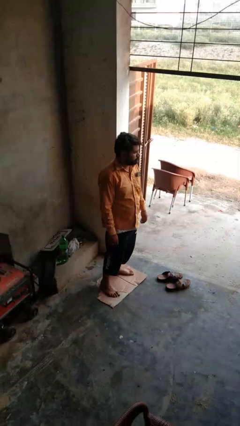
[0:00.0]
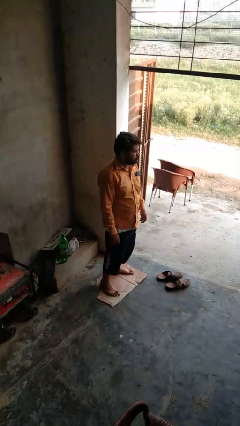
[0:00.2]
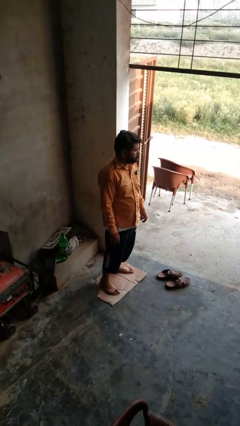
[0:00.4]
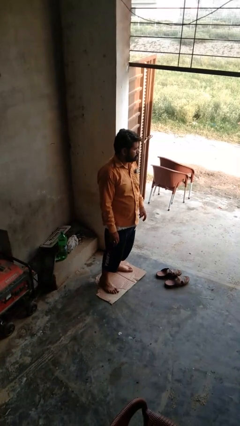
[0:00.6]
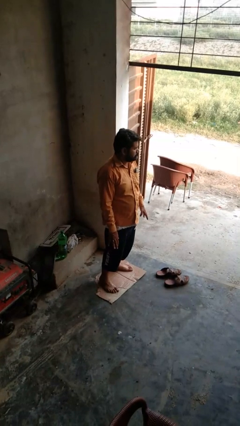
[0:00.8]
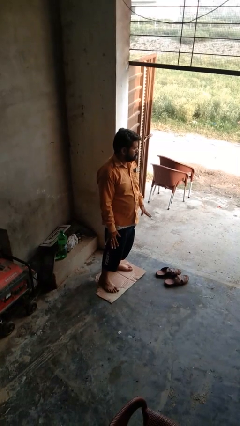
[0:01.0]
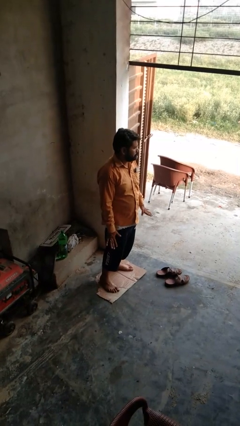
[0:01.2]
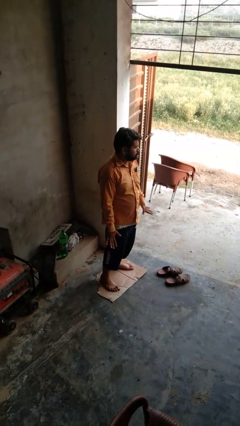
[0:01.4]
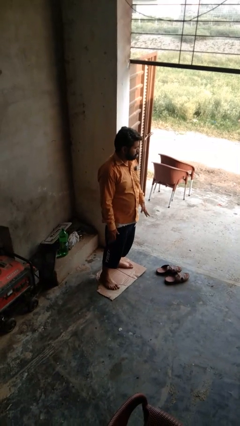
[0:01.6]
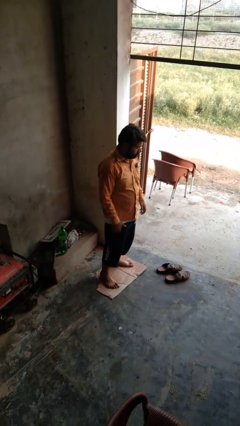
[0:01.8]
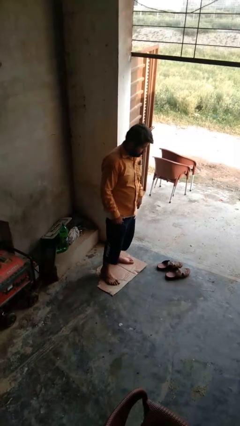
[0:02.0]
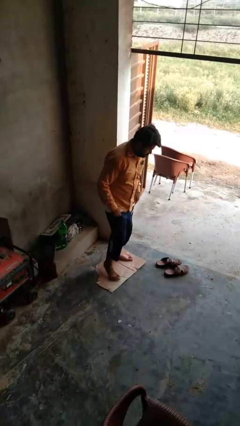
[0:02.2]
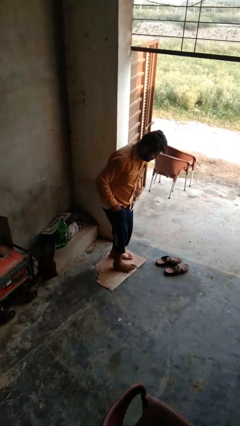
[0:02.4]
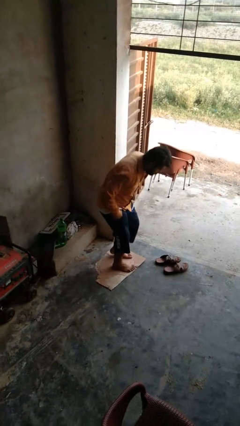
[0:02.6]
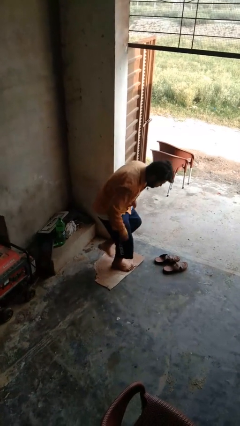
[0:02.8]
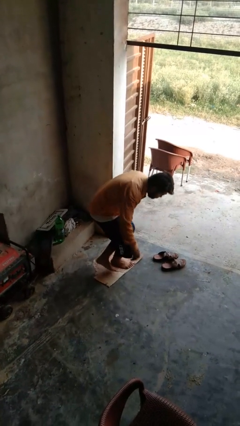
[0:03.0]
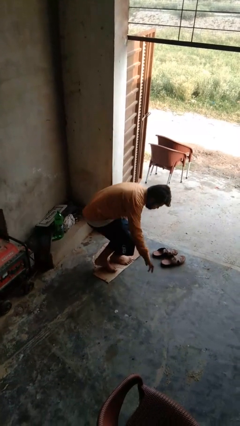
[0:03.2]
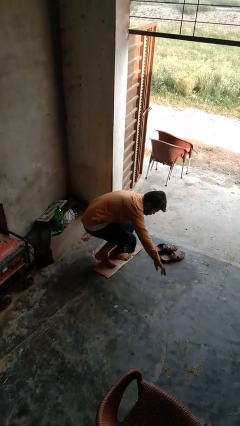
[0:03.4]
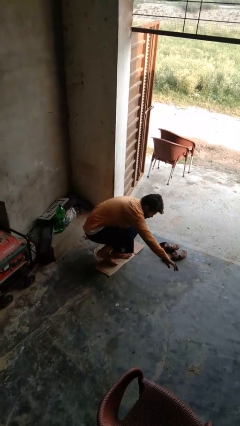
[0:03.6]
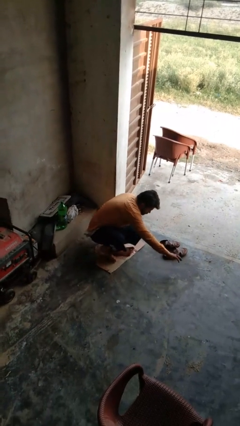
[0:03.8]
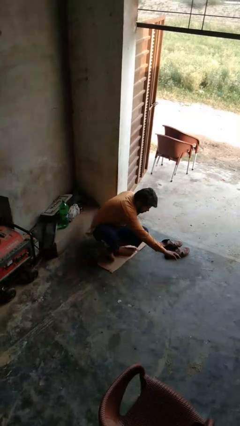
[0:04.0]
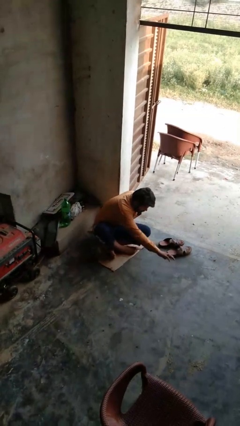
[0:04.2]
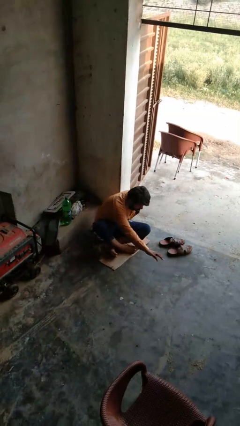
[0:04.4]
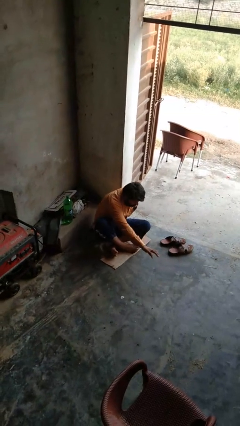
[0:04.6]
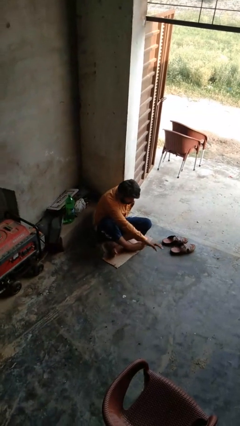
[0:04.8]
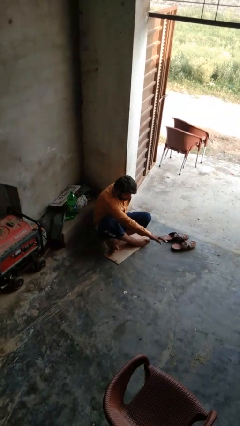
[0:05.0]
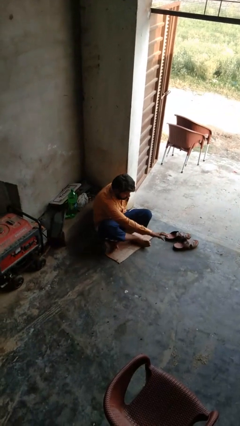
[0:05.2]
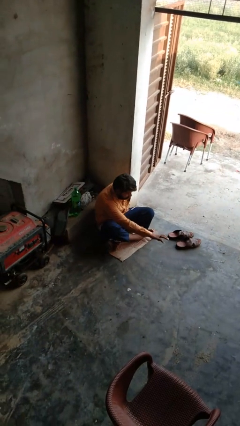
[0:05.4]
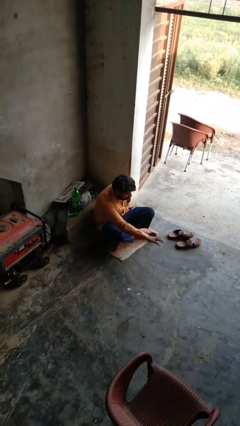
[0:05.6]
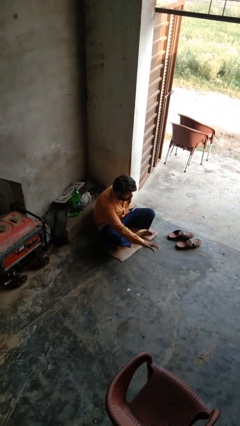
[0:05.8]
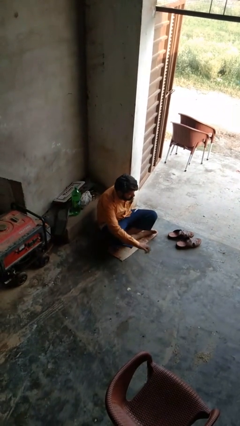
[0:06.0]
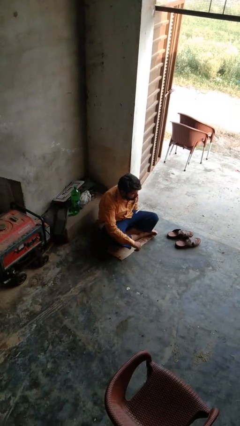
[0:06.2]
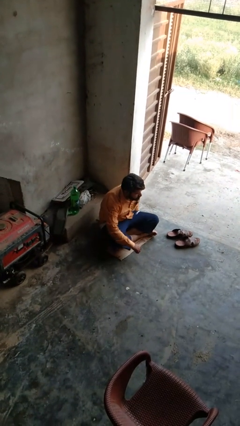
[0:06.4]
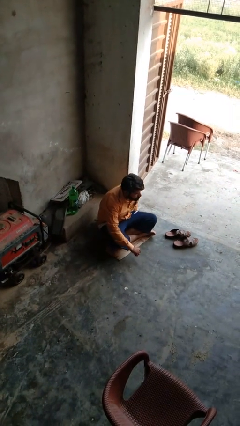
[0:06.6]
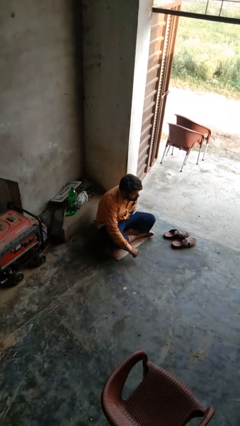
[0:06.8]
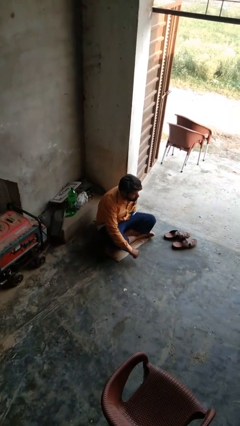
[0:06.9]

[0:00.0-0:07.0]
person sits crisscross

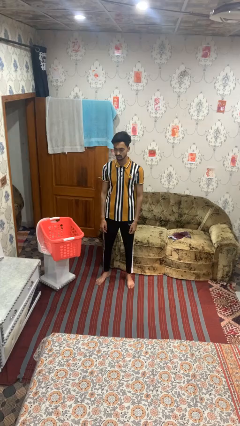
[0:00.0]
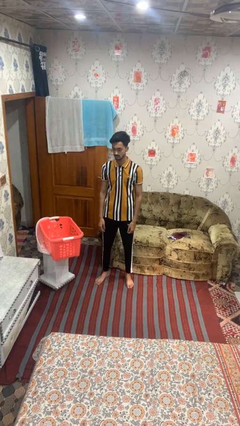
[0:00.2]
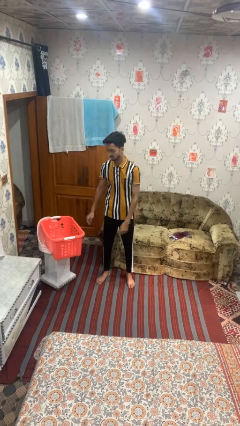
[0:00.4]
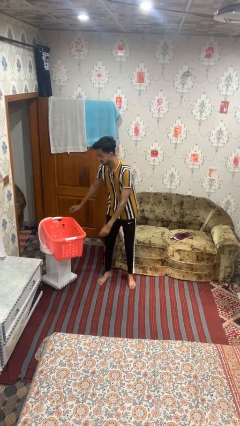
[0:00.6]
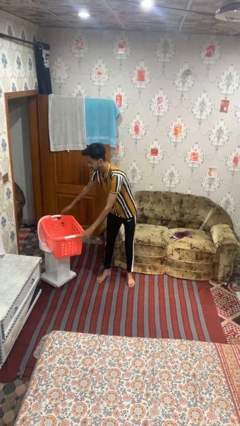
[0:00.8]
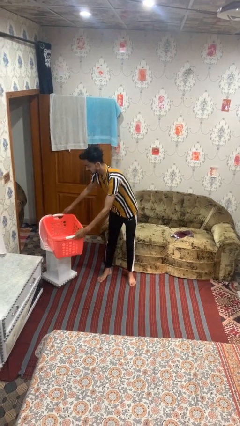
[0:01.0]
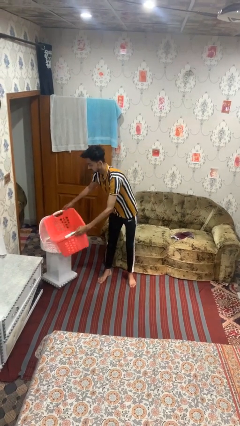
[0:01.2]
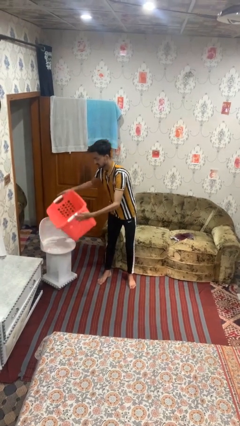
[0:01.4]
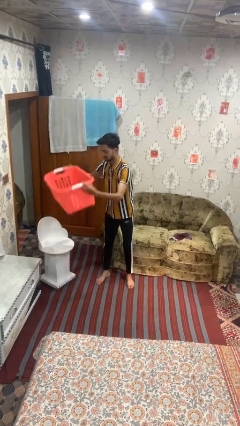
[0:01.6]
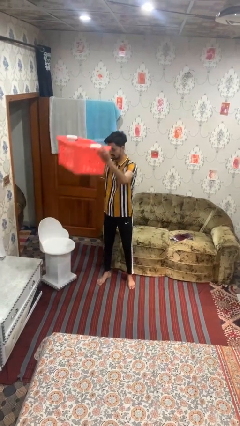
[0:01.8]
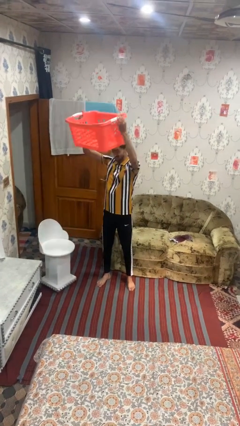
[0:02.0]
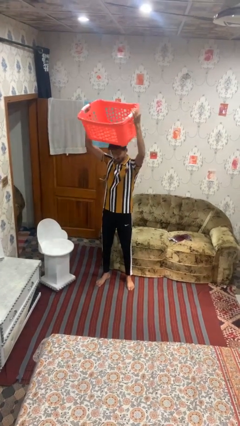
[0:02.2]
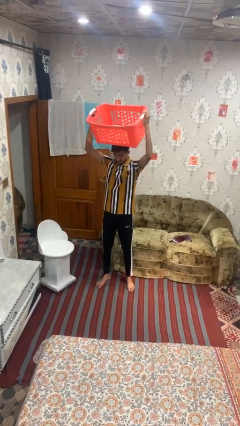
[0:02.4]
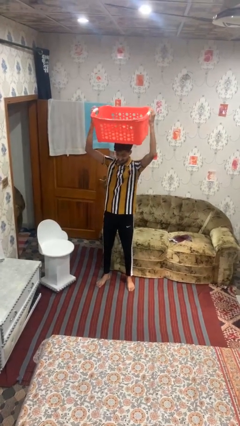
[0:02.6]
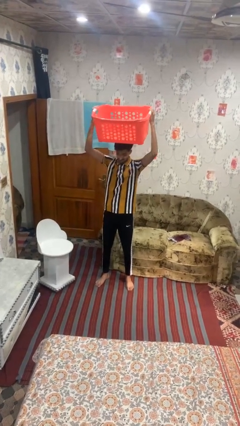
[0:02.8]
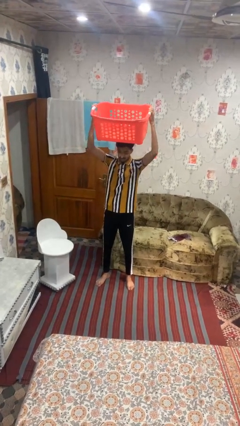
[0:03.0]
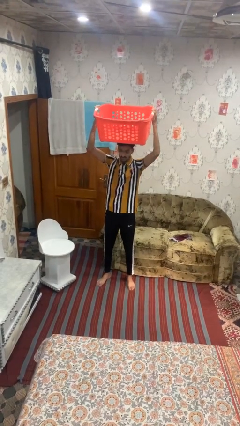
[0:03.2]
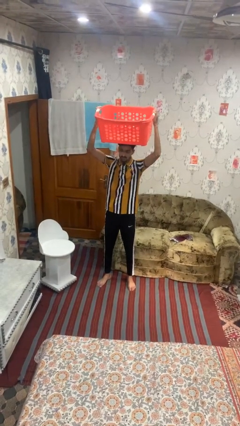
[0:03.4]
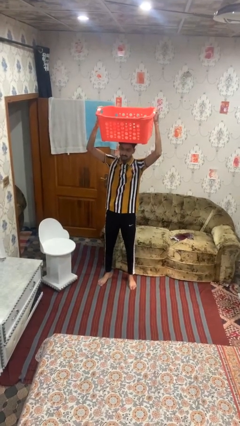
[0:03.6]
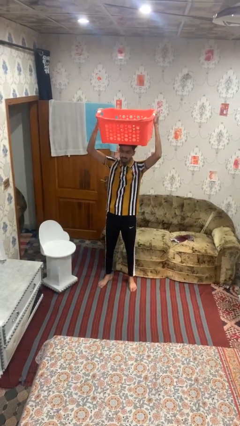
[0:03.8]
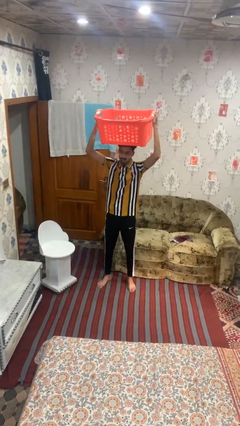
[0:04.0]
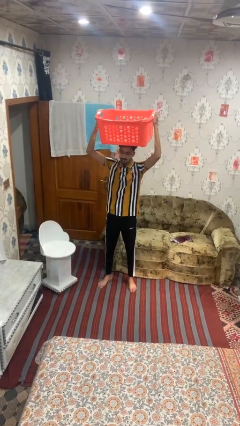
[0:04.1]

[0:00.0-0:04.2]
person holds object above head

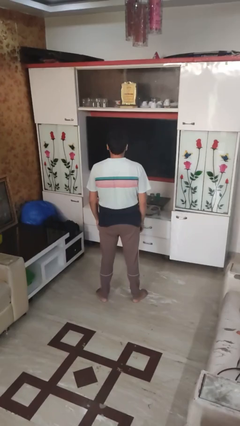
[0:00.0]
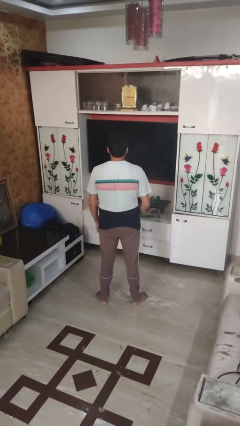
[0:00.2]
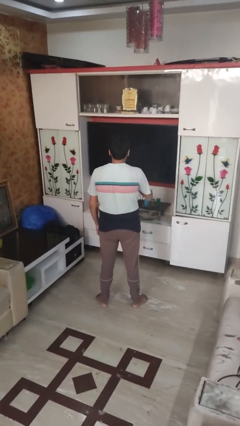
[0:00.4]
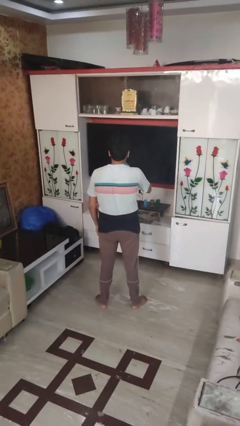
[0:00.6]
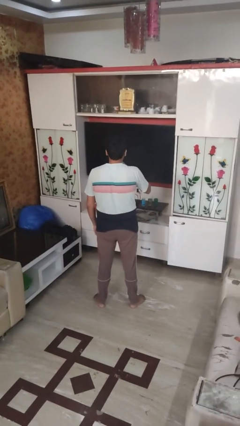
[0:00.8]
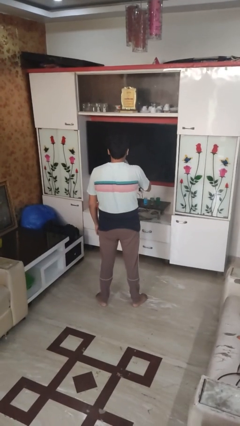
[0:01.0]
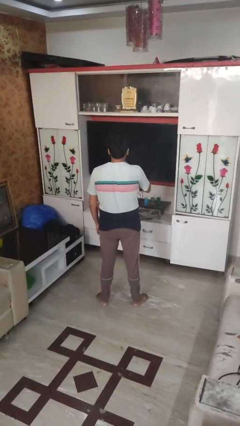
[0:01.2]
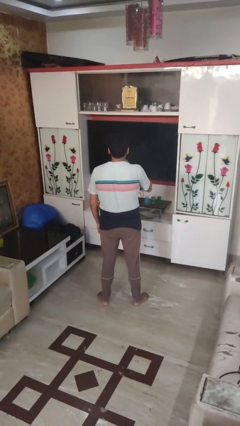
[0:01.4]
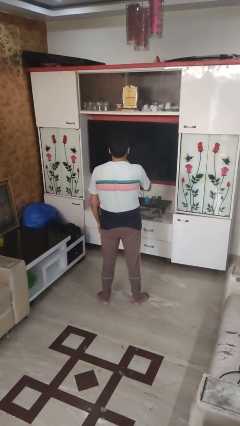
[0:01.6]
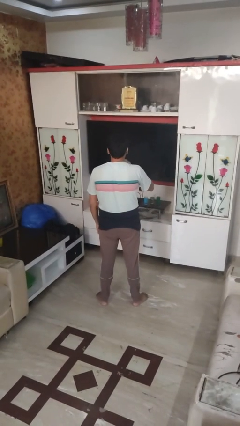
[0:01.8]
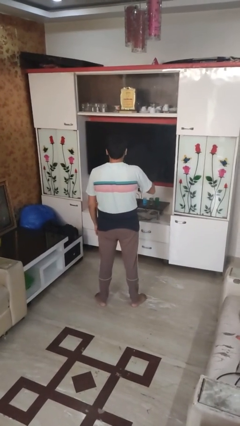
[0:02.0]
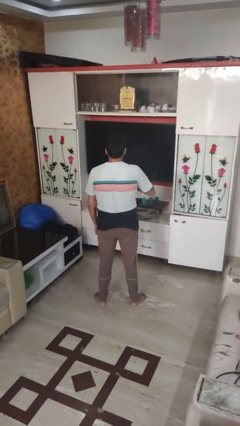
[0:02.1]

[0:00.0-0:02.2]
person strokes chin

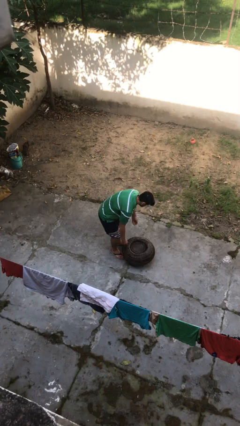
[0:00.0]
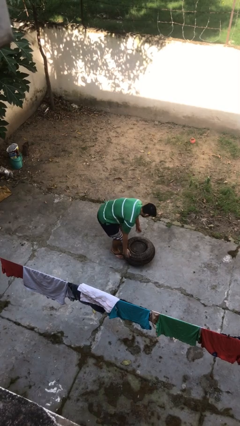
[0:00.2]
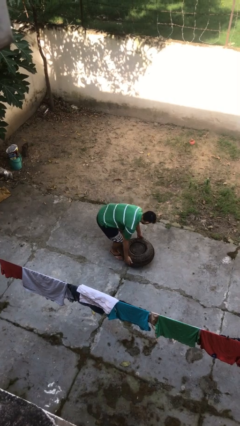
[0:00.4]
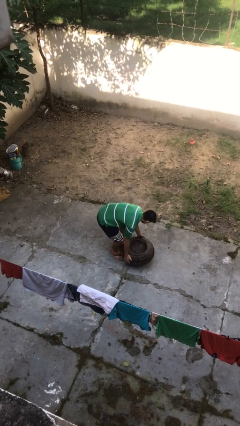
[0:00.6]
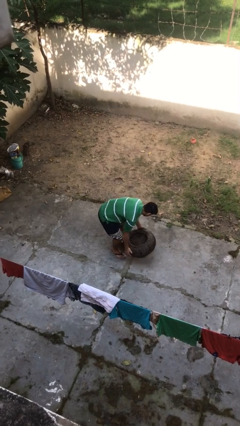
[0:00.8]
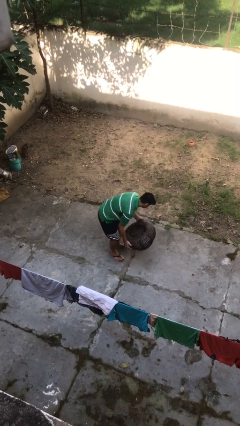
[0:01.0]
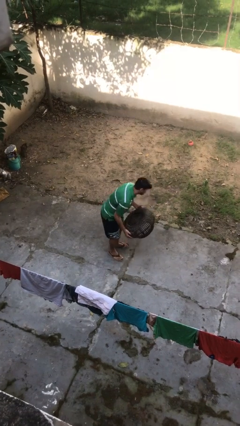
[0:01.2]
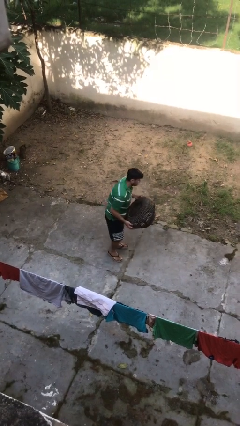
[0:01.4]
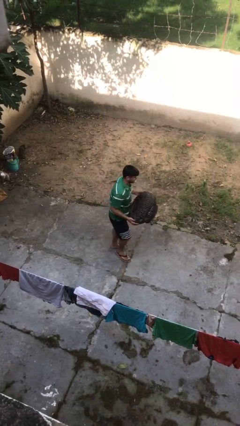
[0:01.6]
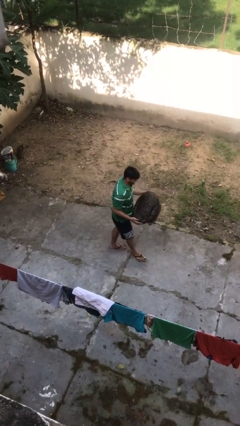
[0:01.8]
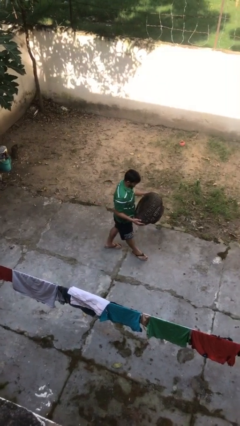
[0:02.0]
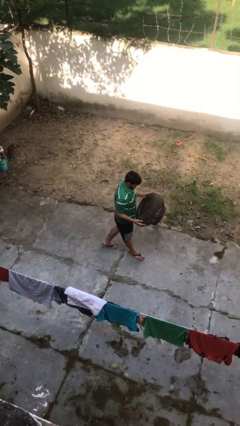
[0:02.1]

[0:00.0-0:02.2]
person picks up object from floor

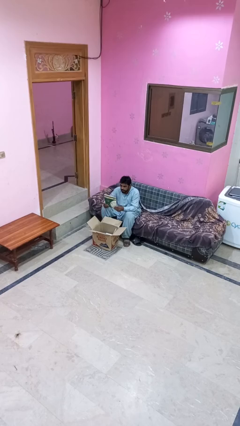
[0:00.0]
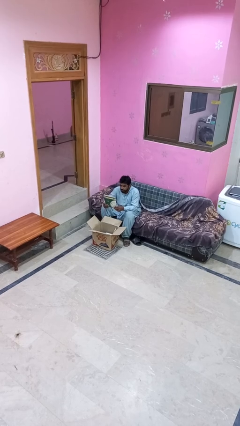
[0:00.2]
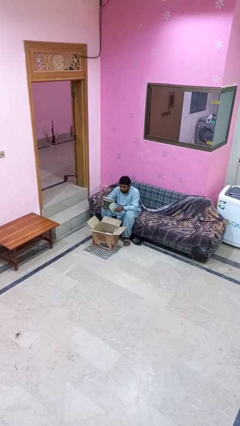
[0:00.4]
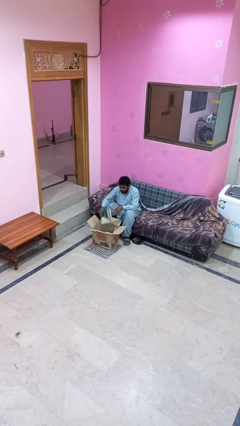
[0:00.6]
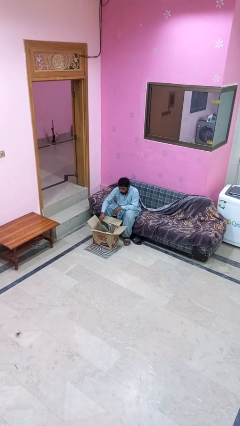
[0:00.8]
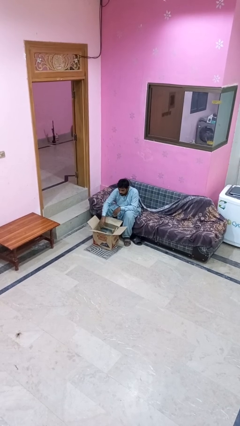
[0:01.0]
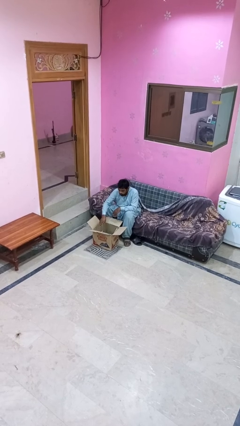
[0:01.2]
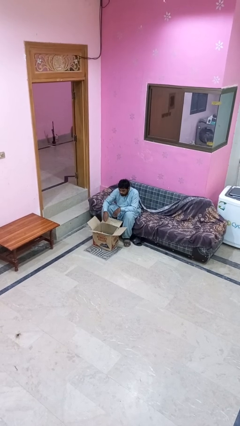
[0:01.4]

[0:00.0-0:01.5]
person puts object into box

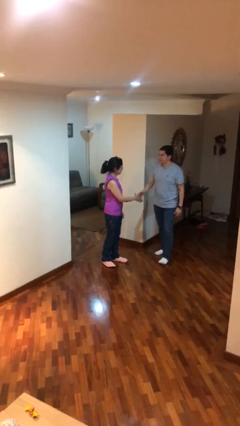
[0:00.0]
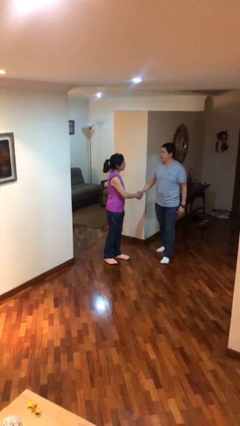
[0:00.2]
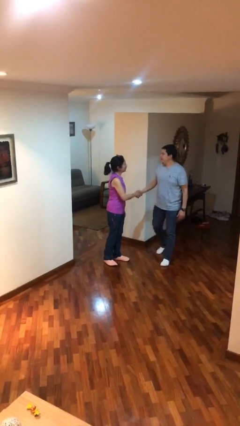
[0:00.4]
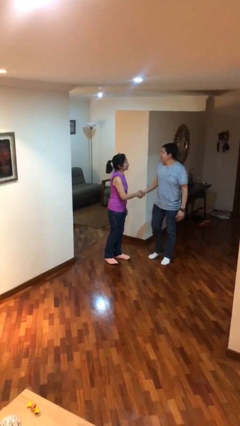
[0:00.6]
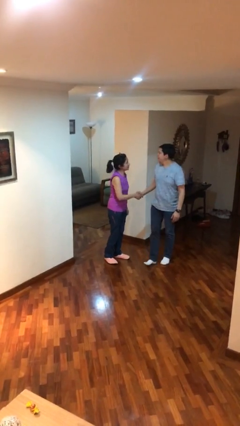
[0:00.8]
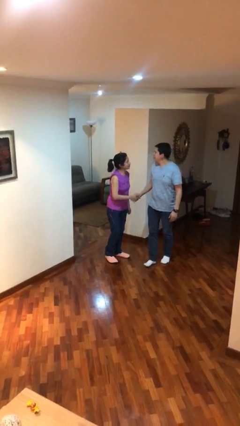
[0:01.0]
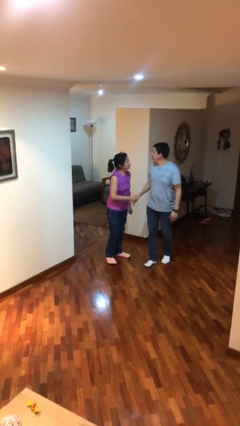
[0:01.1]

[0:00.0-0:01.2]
person shakes hand
